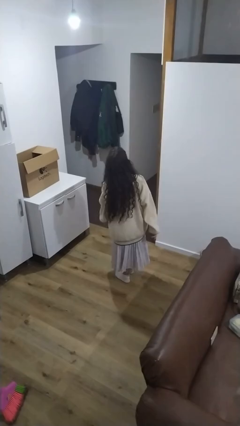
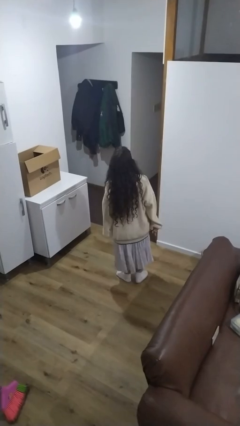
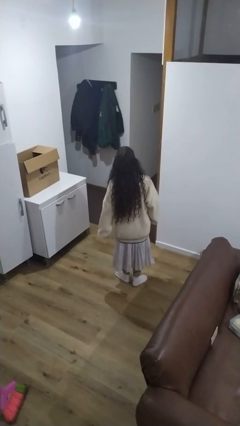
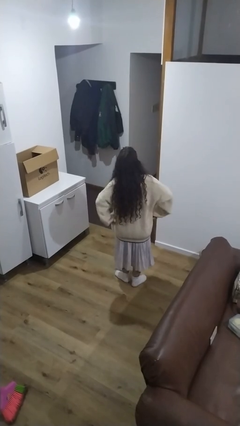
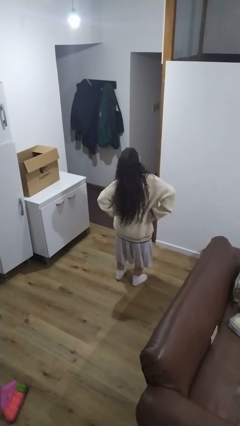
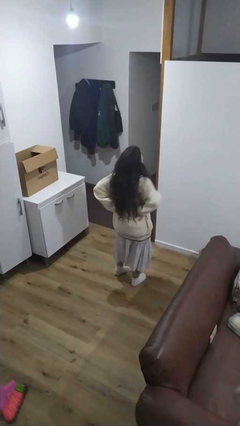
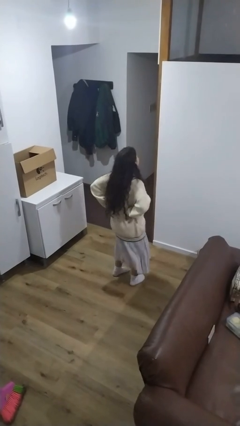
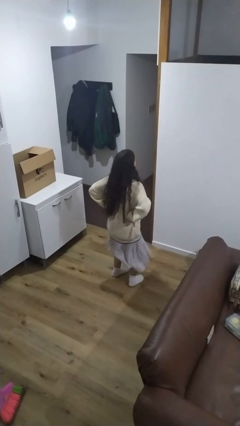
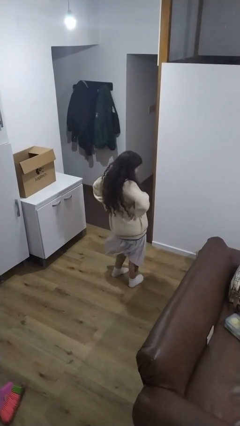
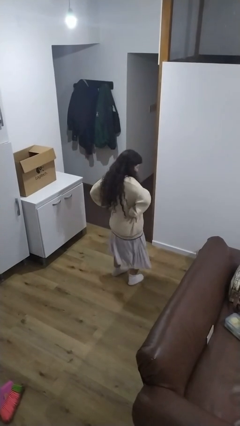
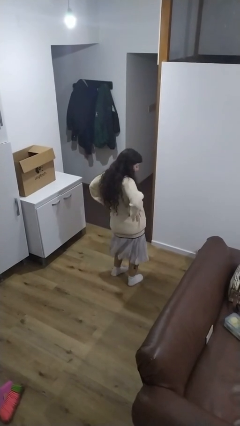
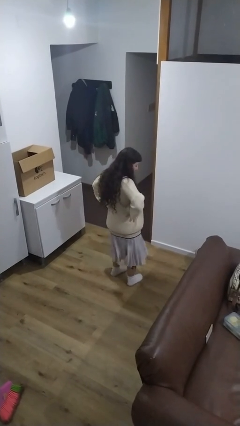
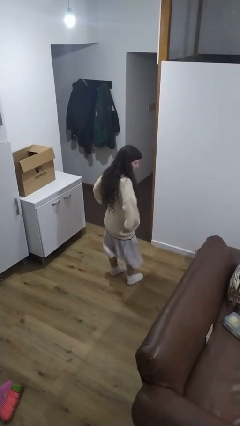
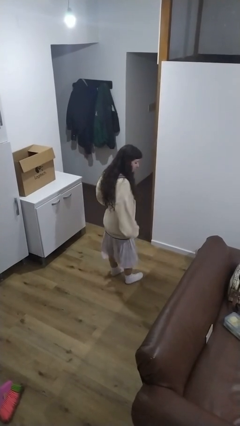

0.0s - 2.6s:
person wiggles hips

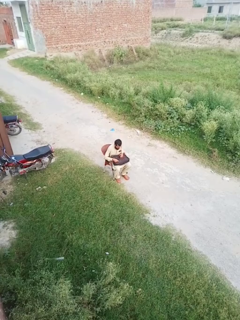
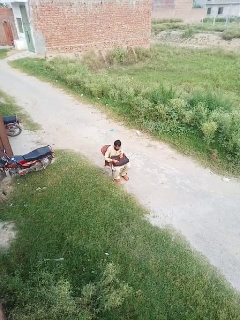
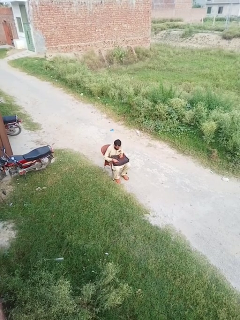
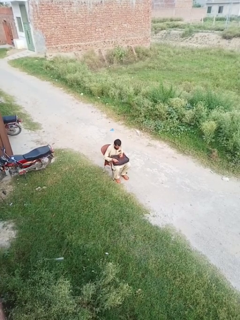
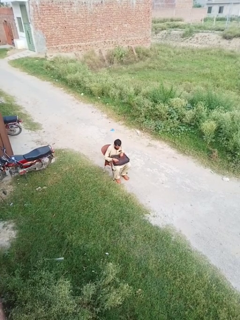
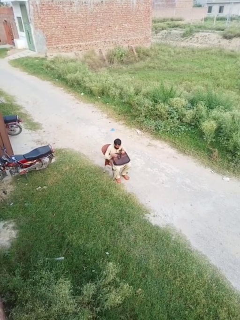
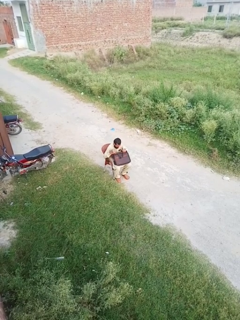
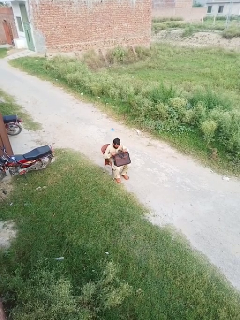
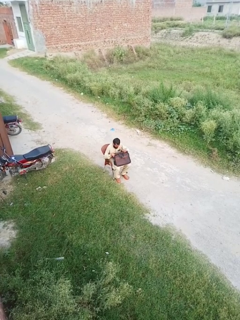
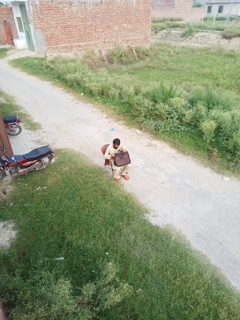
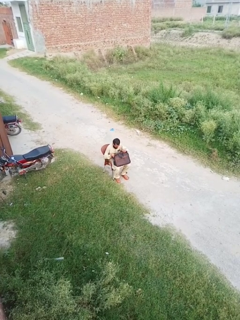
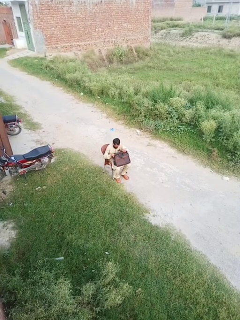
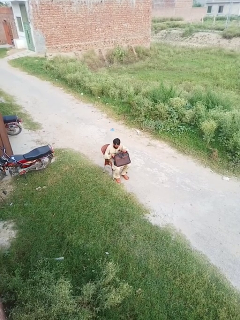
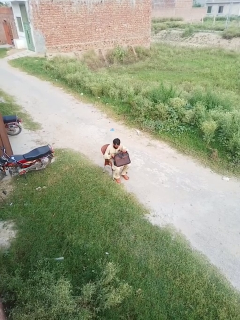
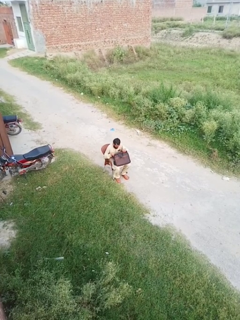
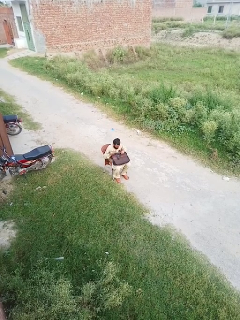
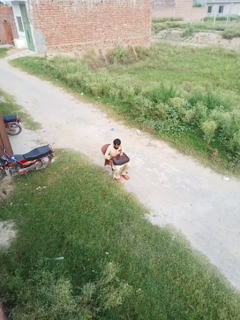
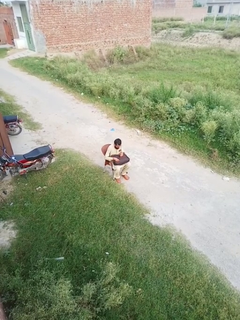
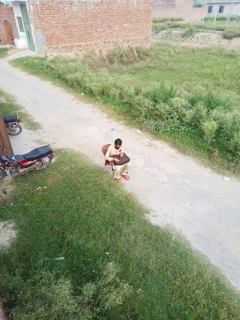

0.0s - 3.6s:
person searches in bag

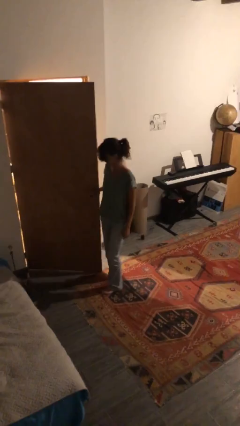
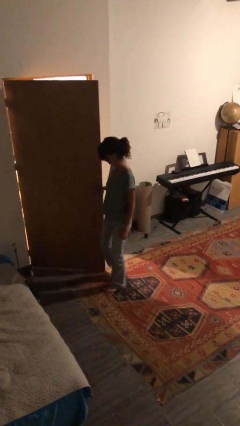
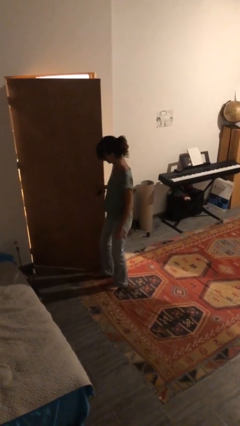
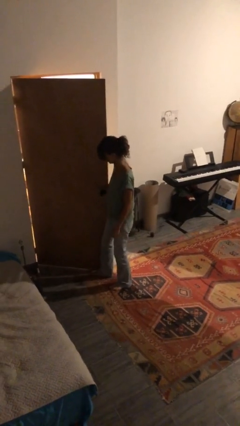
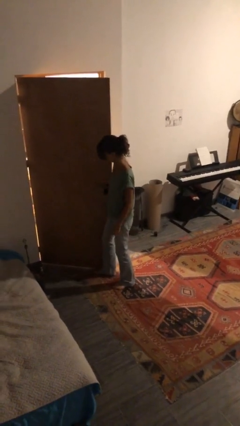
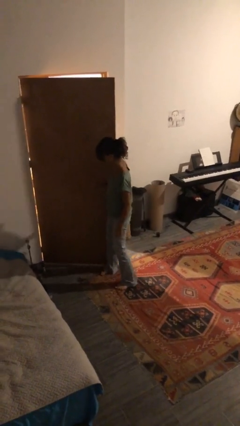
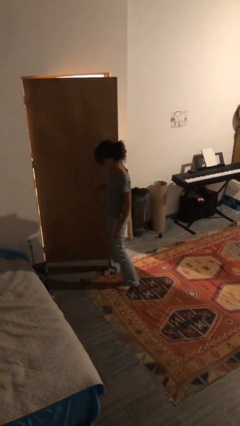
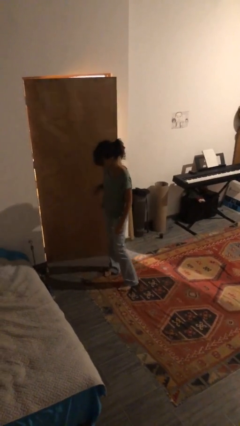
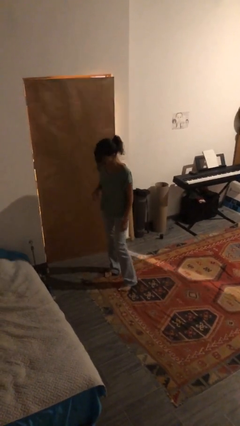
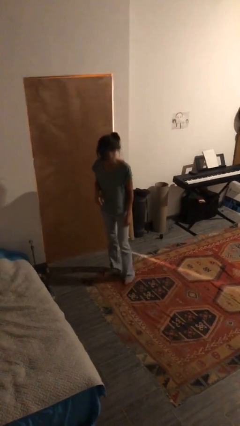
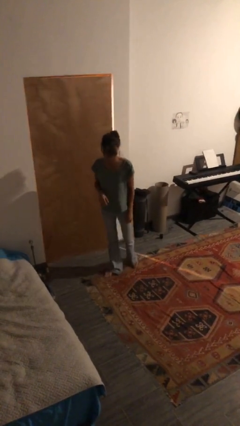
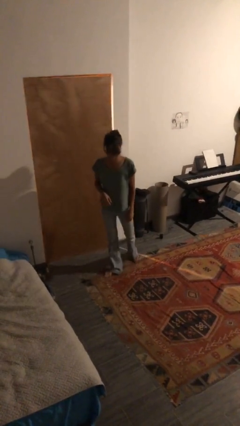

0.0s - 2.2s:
person closes door with hip

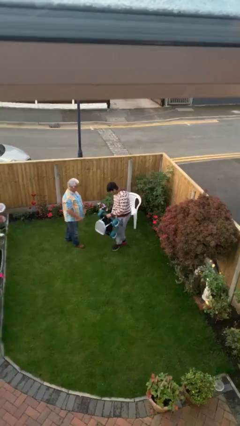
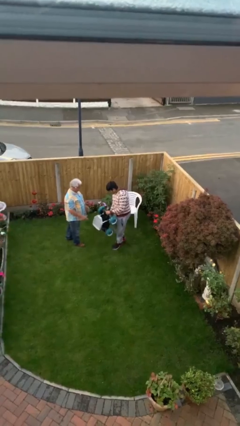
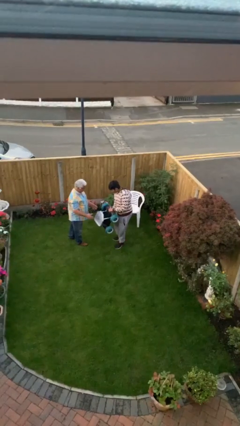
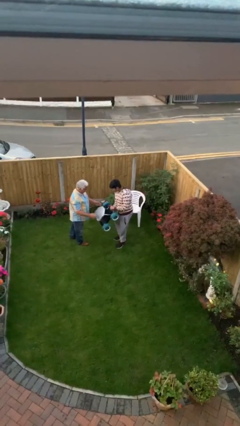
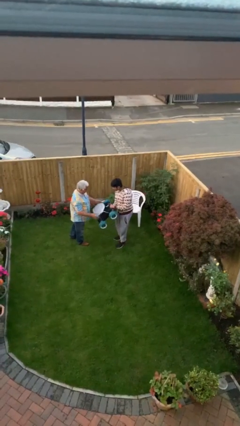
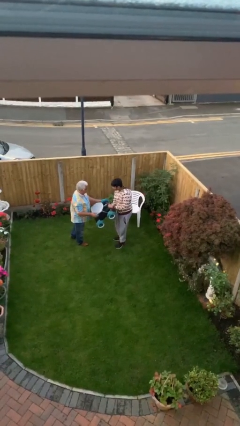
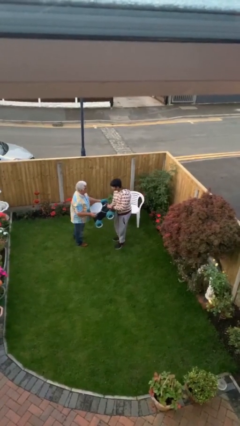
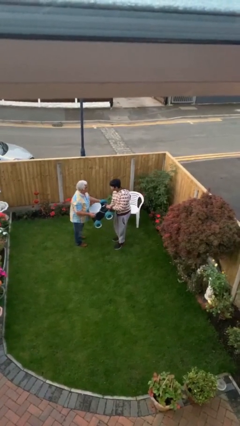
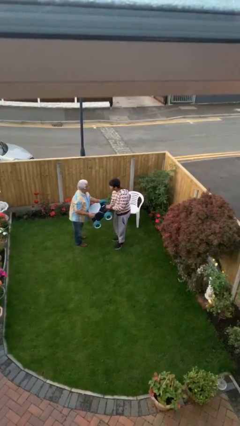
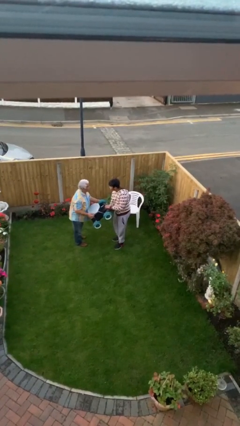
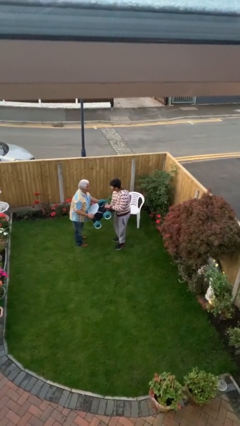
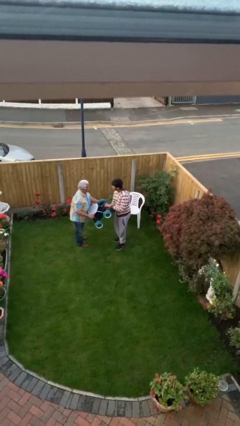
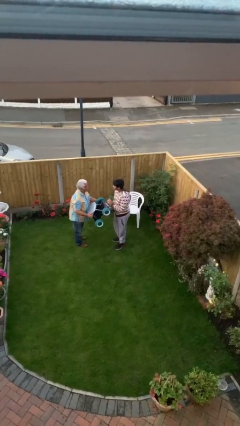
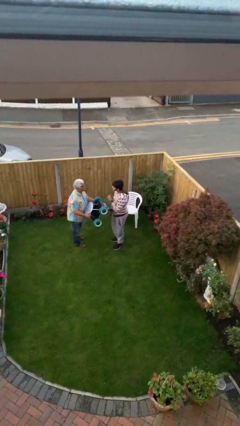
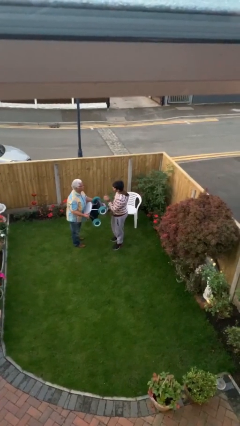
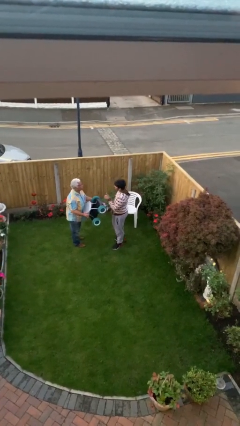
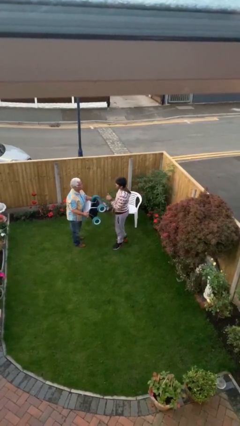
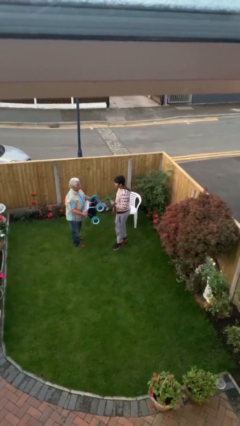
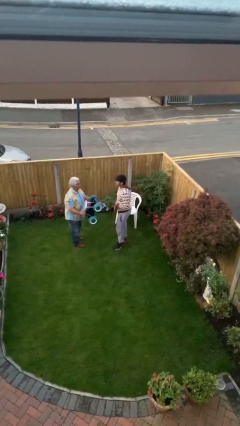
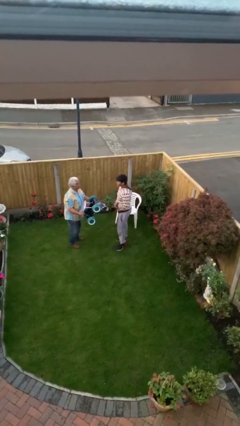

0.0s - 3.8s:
person transfers object to person

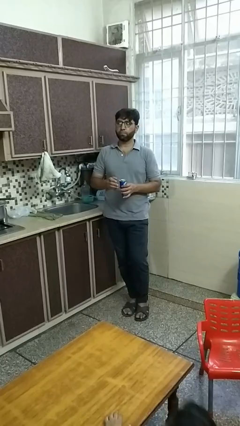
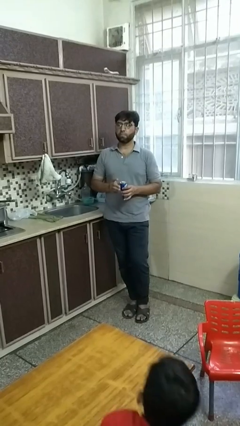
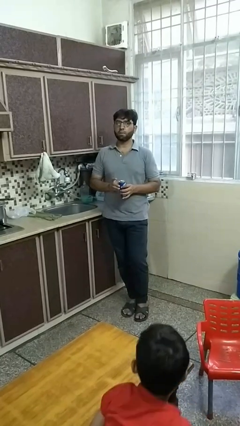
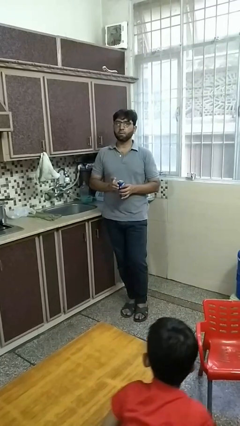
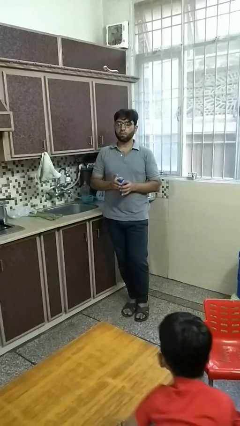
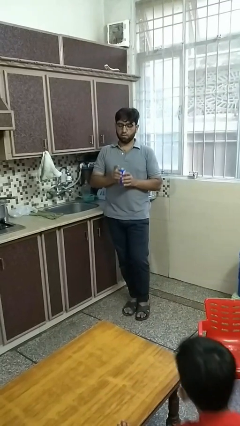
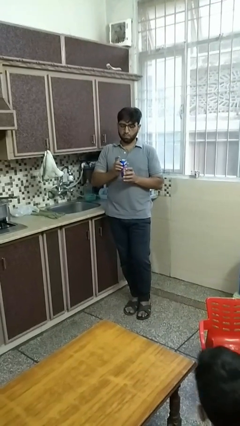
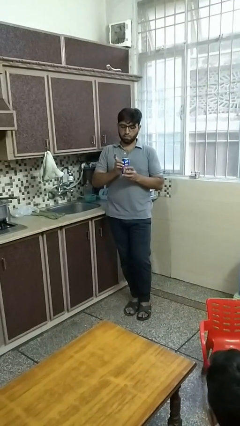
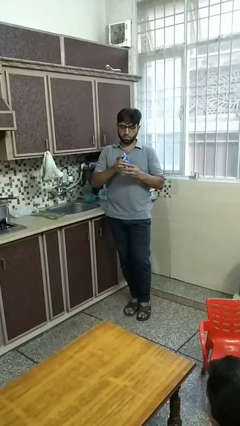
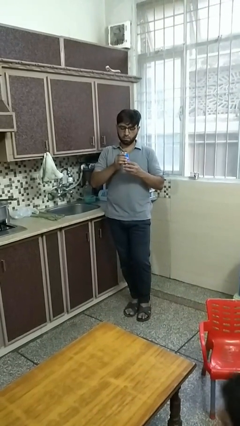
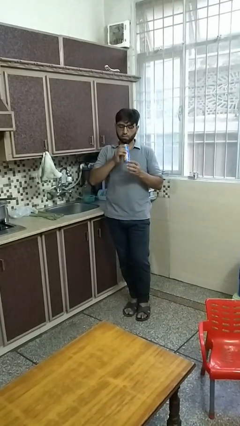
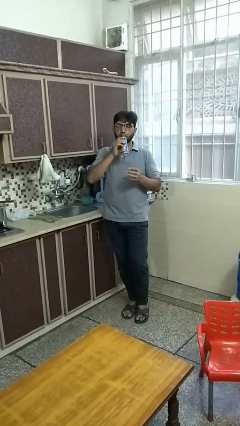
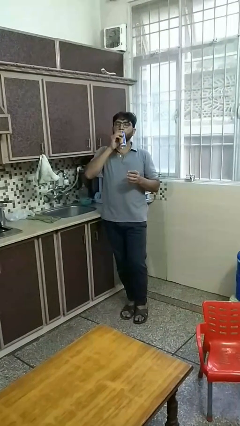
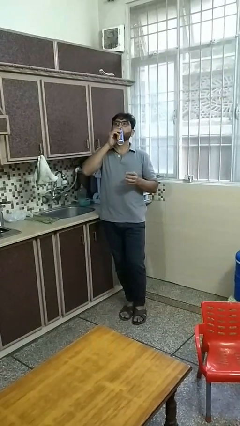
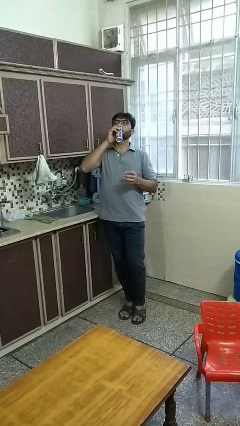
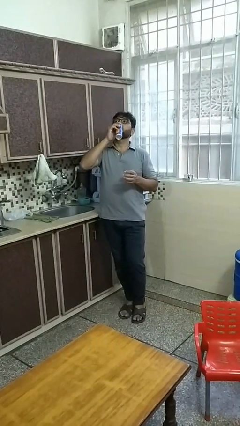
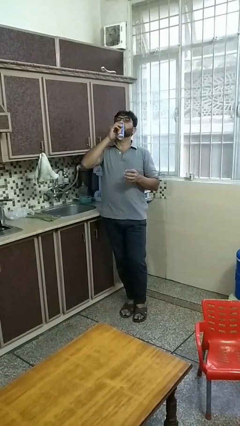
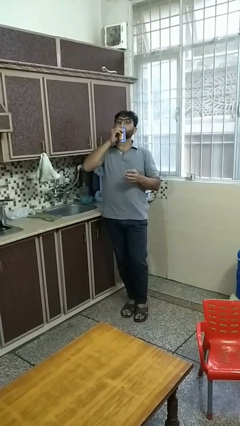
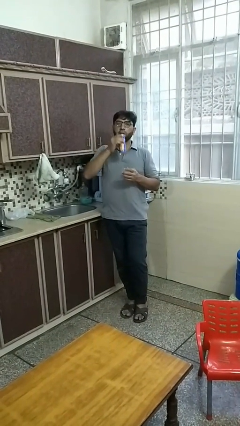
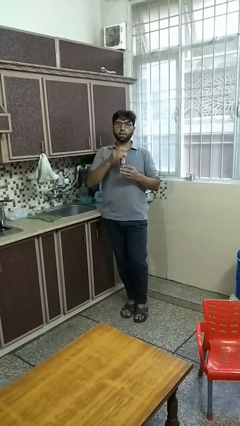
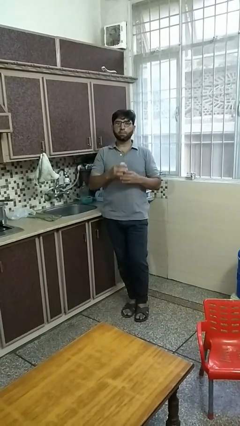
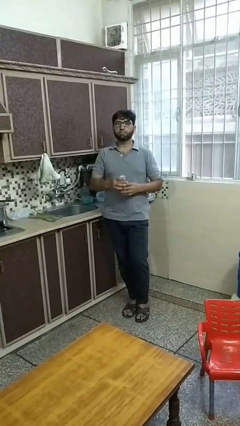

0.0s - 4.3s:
person drinks from beverage can

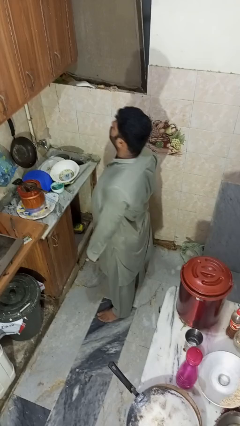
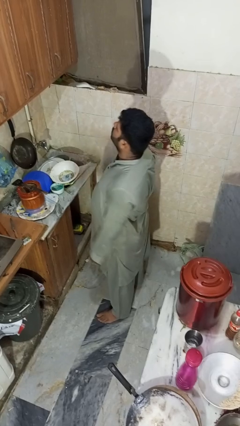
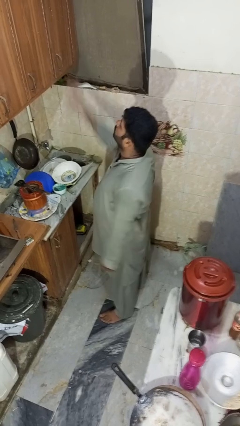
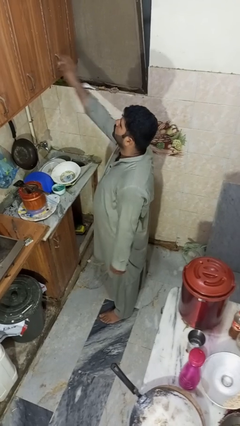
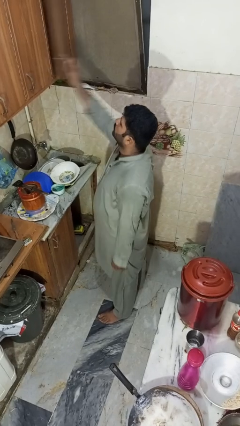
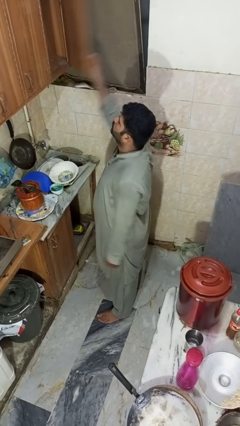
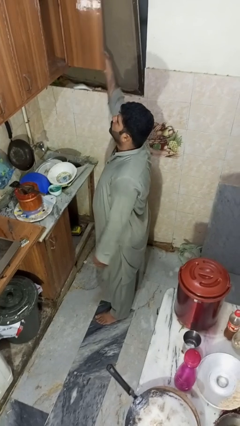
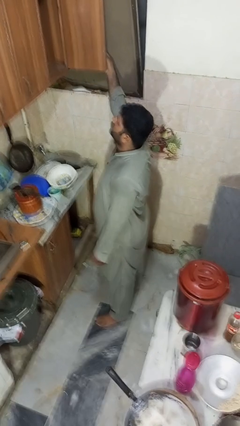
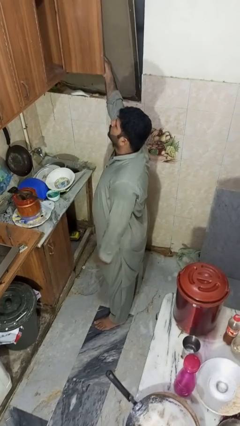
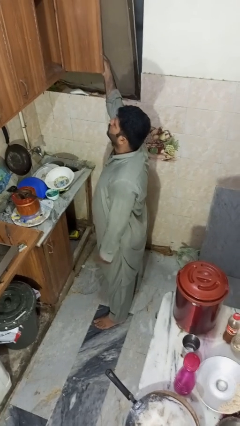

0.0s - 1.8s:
person opens cabinet
